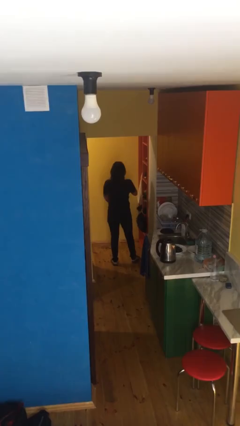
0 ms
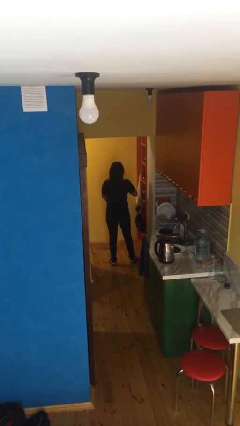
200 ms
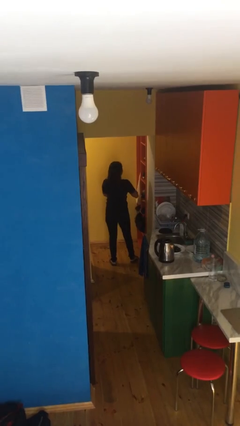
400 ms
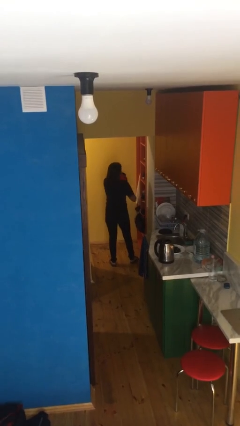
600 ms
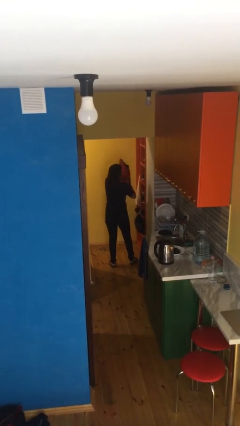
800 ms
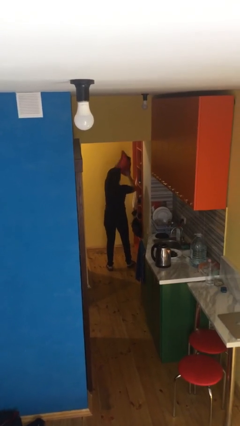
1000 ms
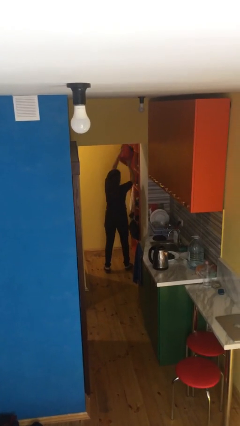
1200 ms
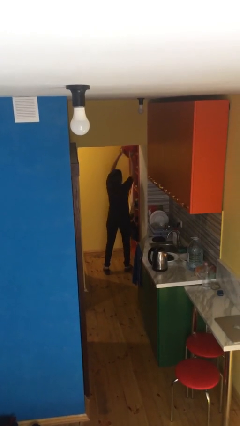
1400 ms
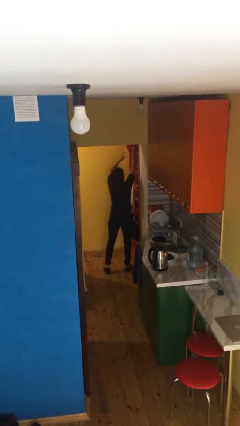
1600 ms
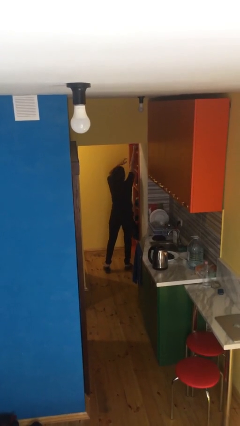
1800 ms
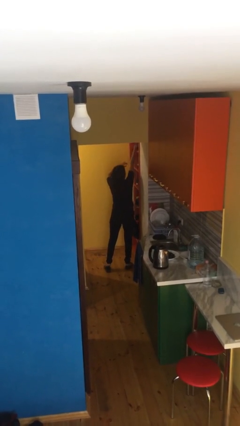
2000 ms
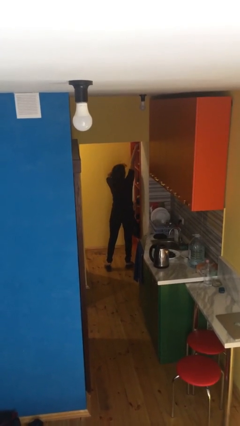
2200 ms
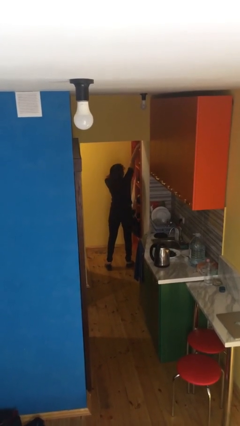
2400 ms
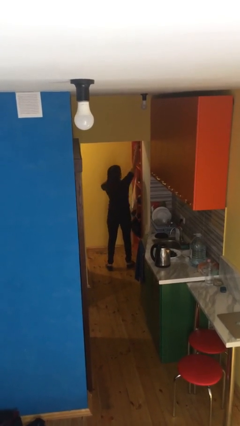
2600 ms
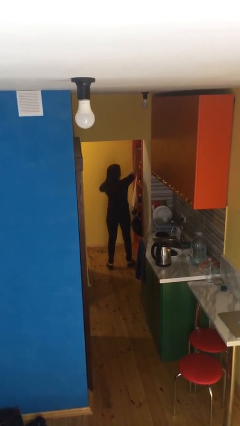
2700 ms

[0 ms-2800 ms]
person puts down object on shelf

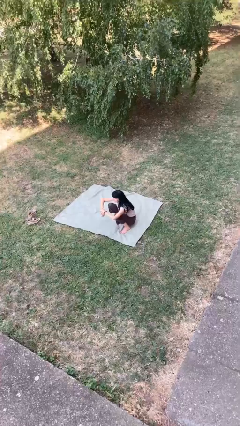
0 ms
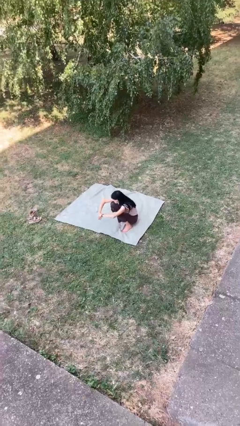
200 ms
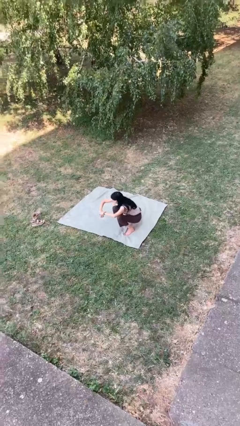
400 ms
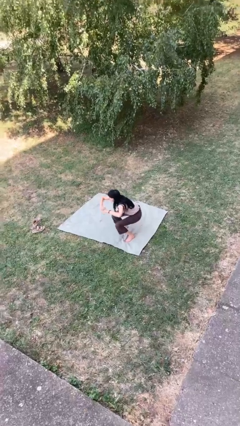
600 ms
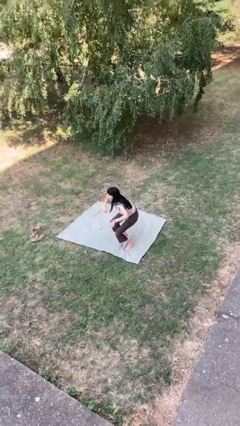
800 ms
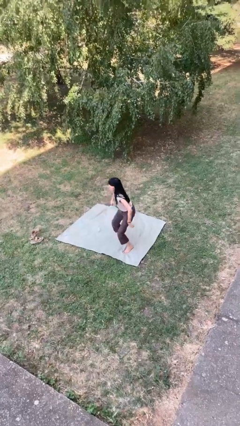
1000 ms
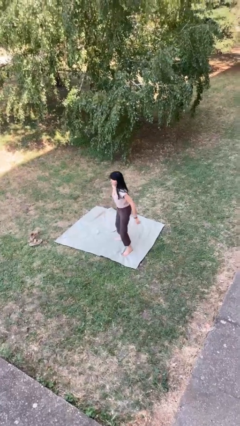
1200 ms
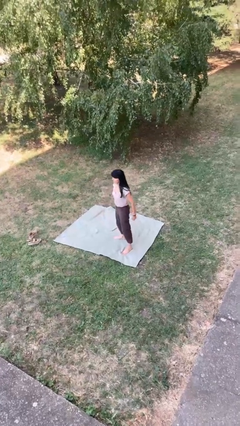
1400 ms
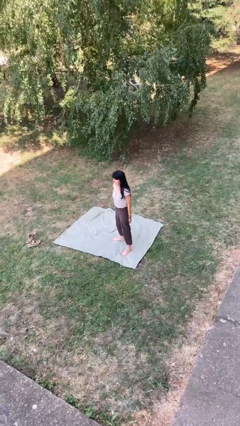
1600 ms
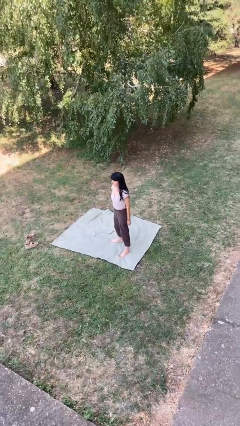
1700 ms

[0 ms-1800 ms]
person stands up

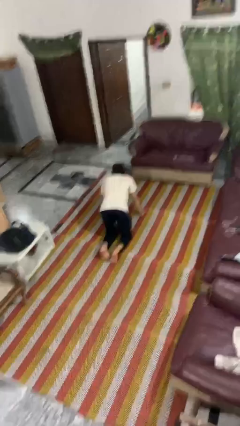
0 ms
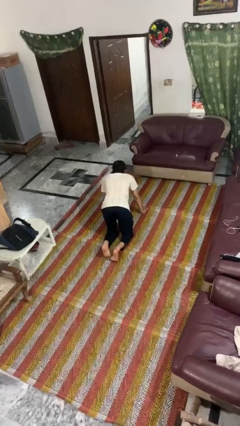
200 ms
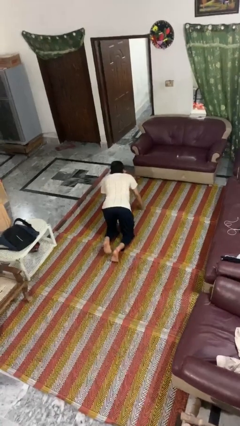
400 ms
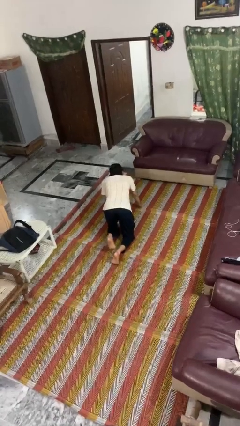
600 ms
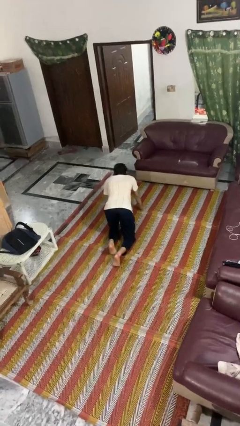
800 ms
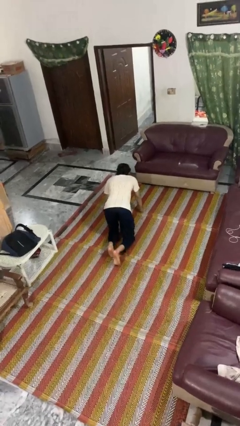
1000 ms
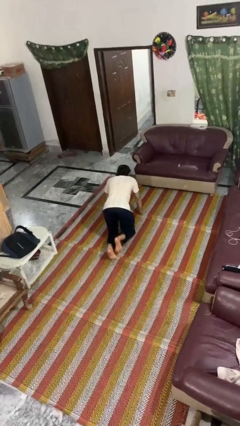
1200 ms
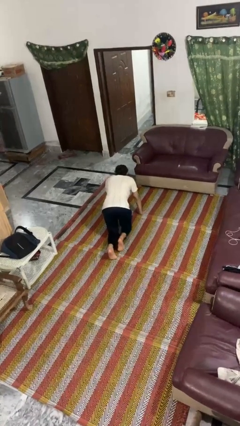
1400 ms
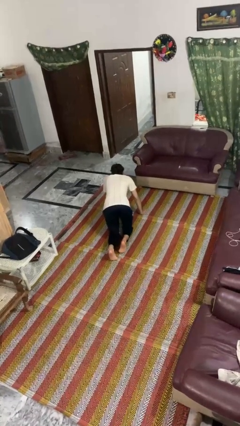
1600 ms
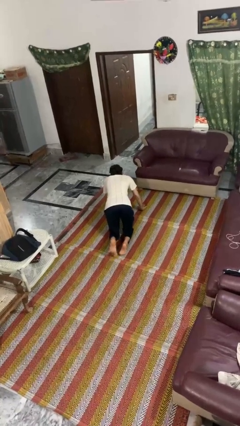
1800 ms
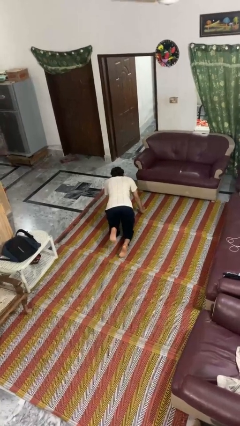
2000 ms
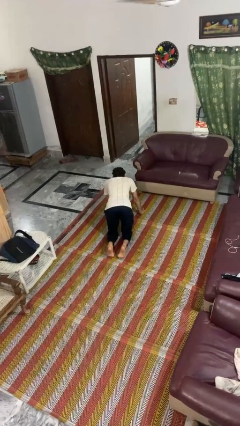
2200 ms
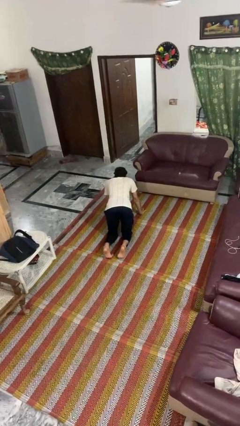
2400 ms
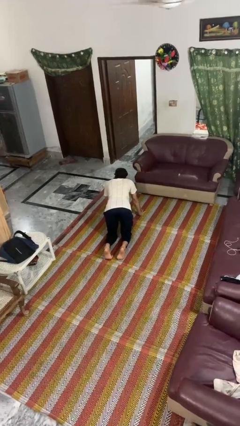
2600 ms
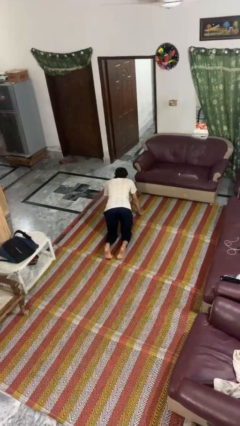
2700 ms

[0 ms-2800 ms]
person crawls

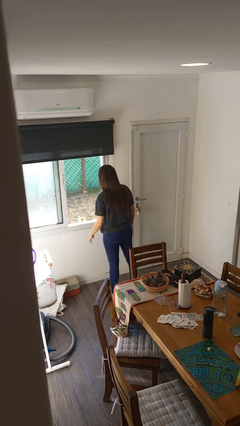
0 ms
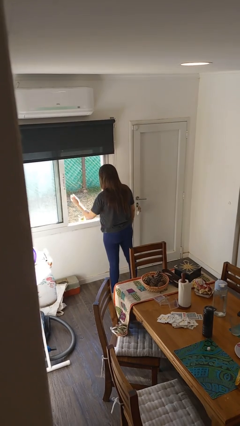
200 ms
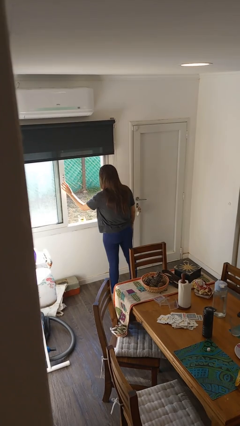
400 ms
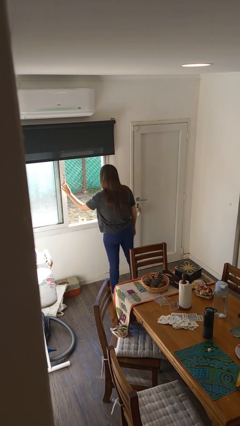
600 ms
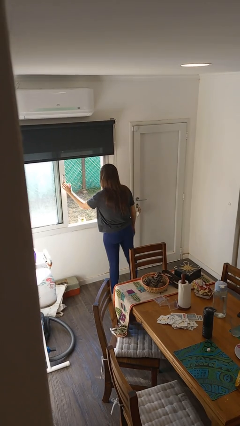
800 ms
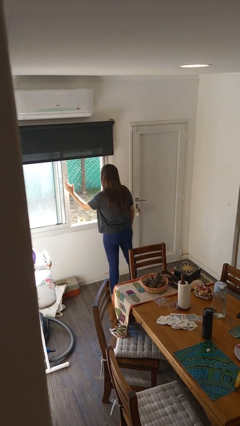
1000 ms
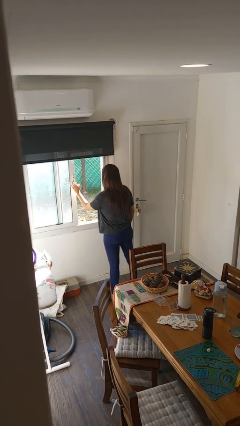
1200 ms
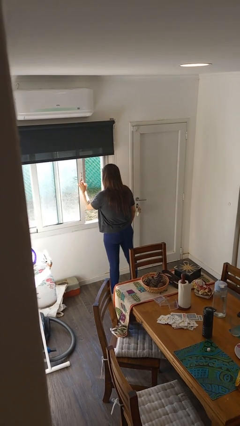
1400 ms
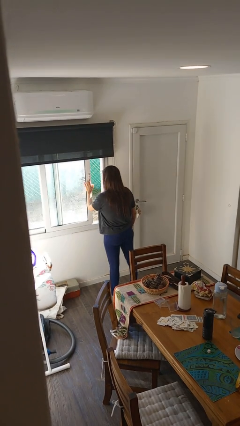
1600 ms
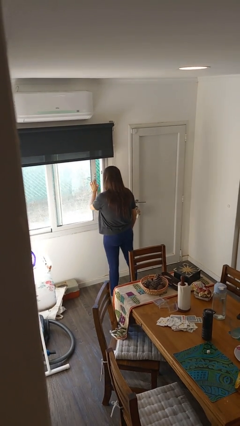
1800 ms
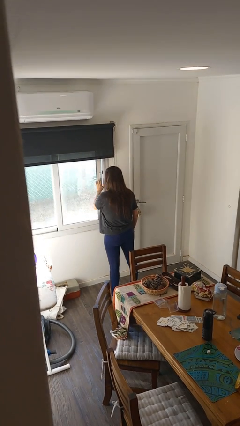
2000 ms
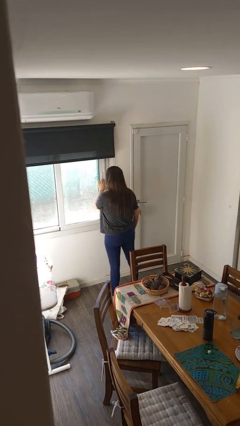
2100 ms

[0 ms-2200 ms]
person closes home window

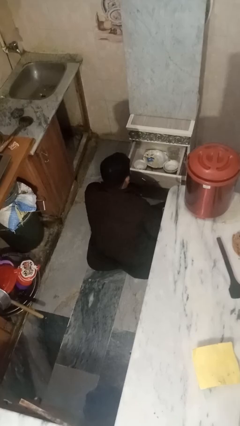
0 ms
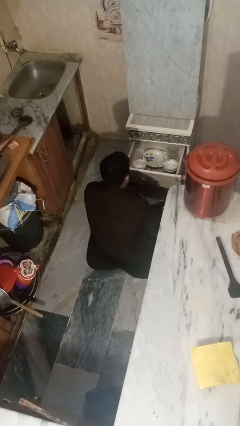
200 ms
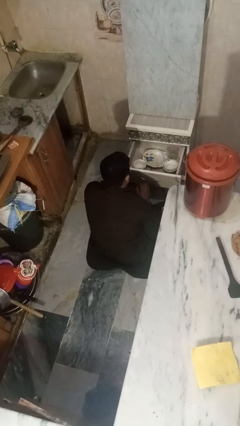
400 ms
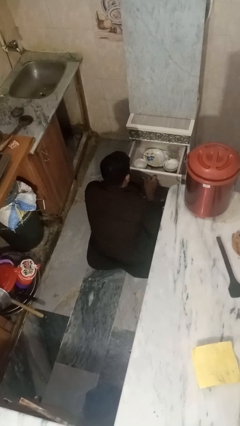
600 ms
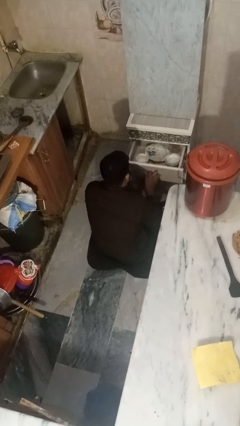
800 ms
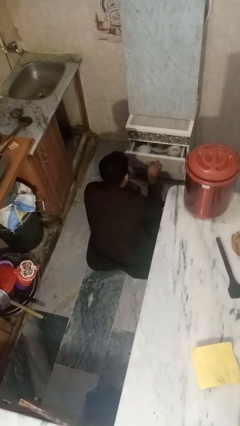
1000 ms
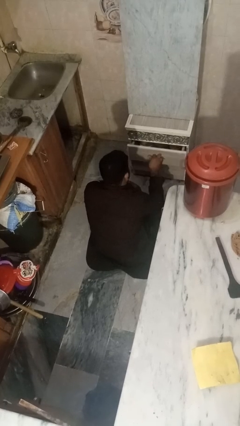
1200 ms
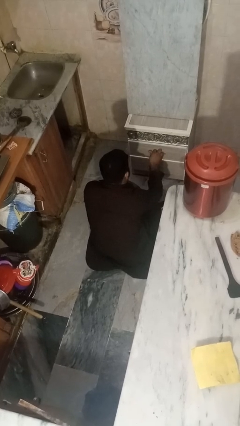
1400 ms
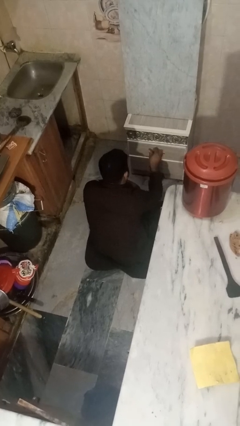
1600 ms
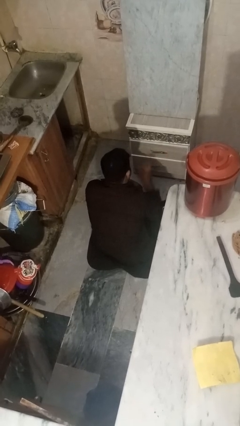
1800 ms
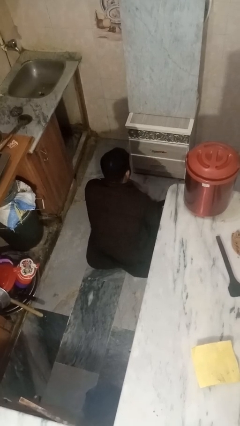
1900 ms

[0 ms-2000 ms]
person closes kitchen drawer

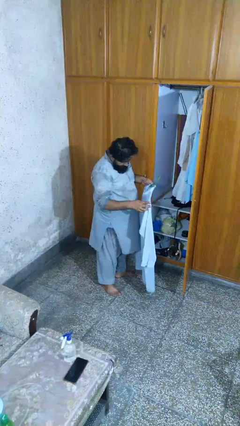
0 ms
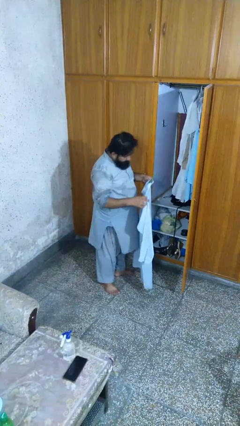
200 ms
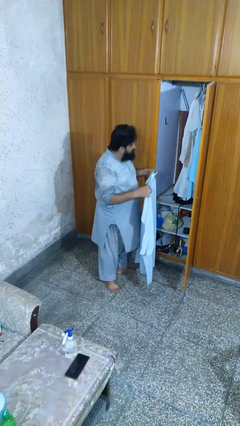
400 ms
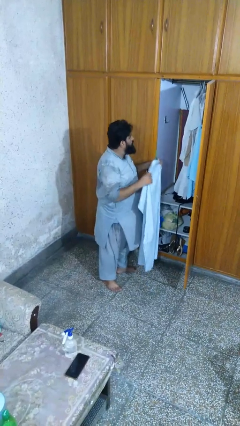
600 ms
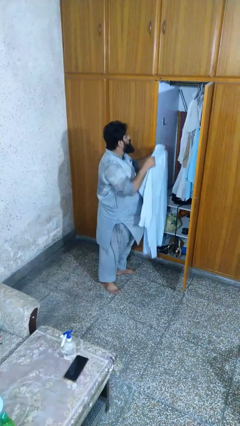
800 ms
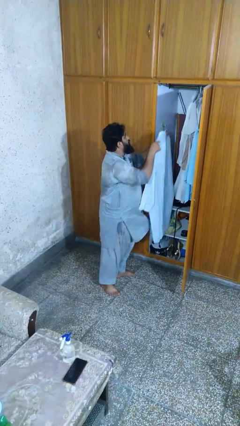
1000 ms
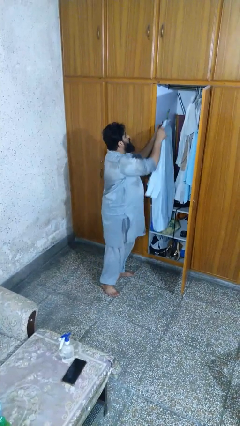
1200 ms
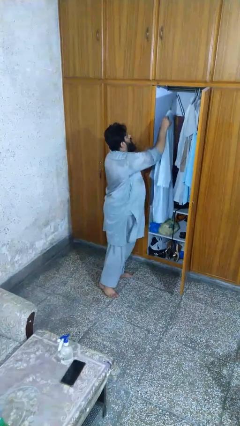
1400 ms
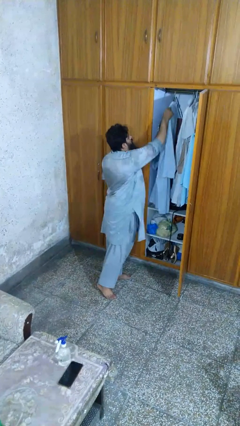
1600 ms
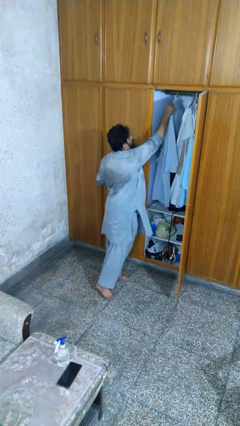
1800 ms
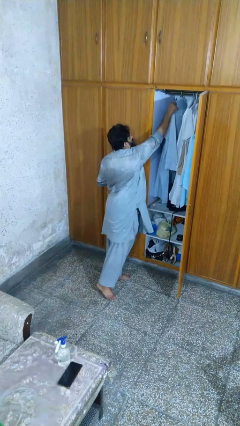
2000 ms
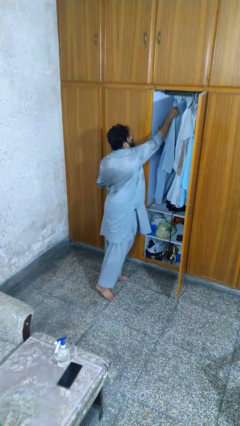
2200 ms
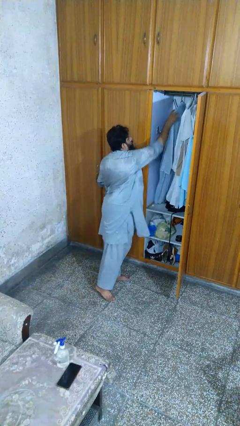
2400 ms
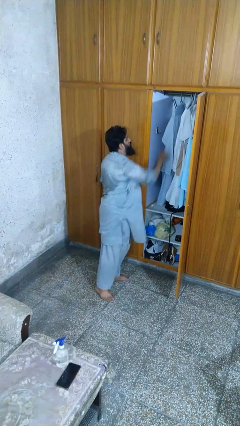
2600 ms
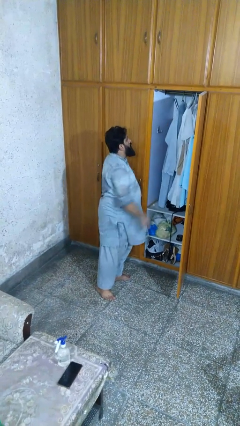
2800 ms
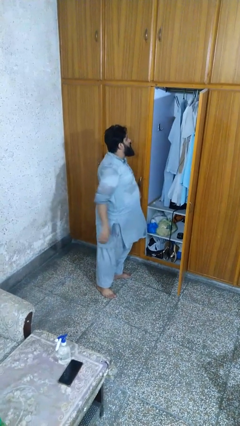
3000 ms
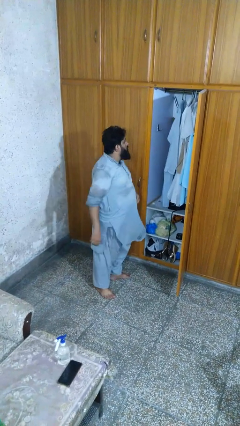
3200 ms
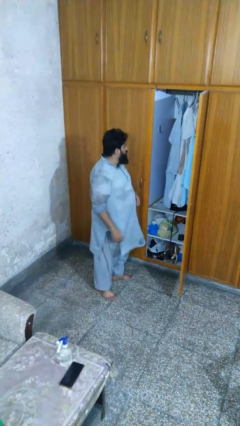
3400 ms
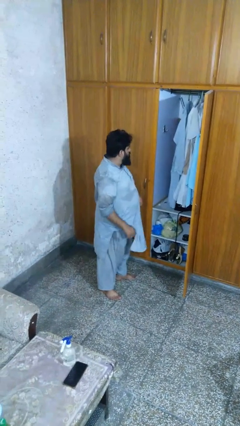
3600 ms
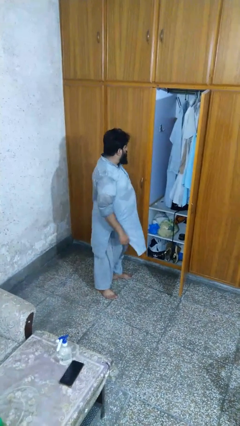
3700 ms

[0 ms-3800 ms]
person puts clothes into closet

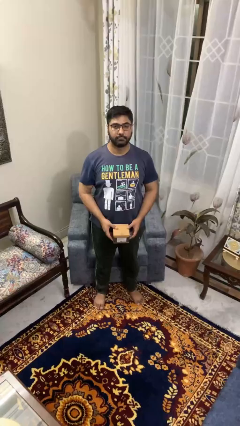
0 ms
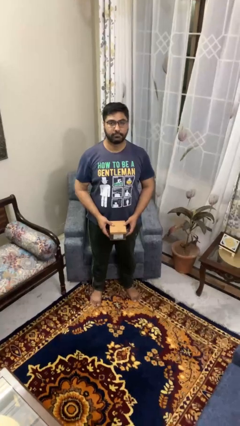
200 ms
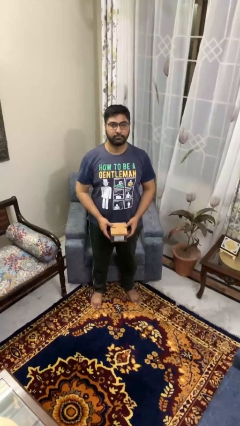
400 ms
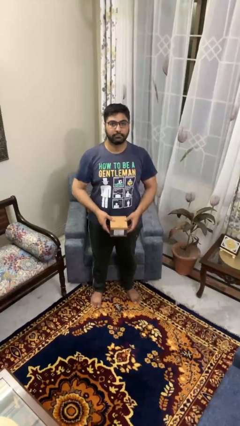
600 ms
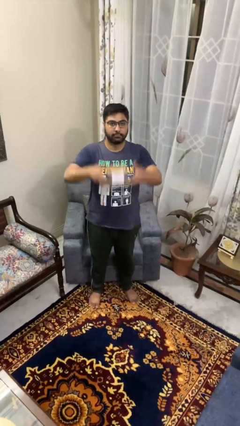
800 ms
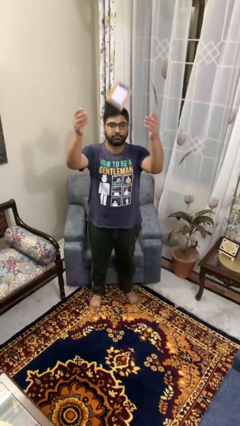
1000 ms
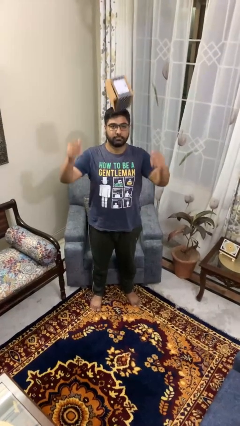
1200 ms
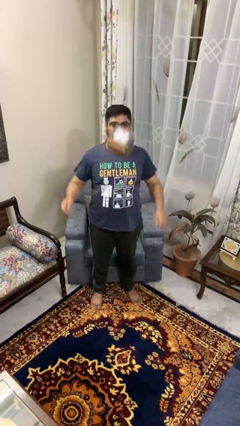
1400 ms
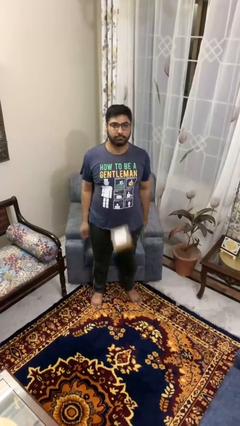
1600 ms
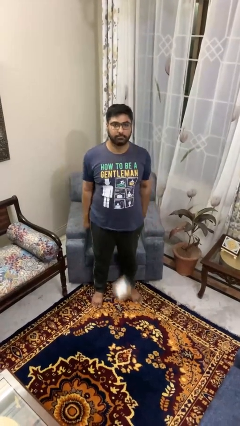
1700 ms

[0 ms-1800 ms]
person throws object into air
